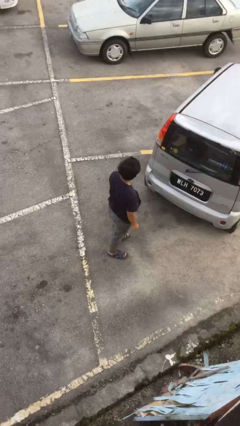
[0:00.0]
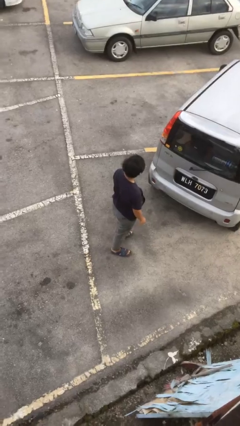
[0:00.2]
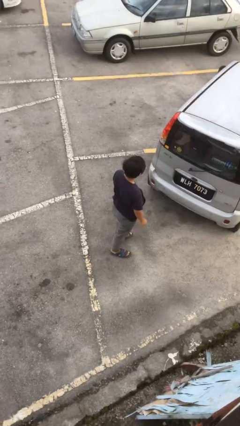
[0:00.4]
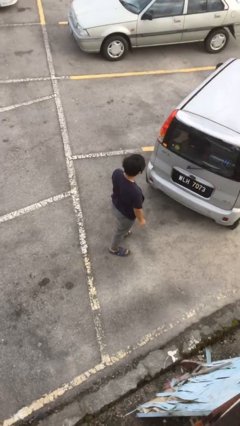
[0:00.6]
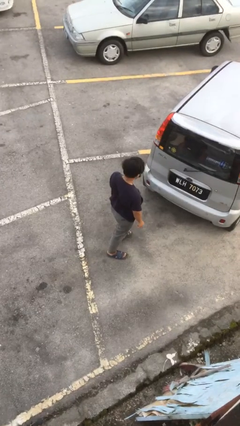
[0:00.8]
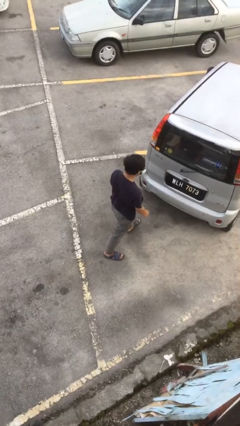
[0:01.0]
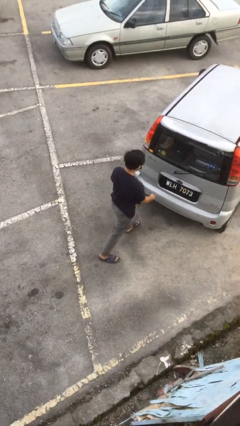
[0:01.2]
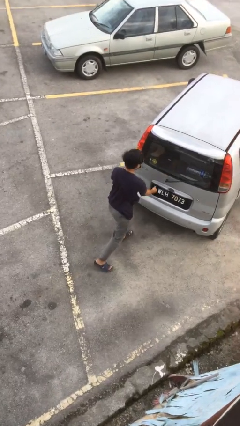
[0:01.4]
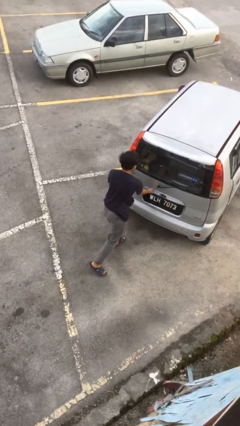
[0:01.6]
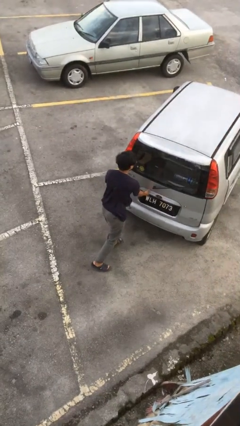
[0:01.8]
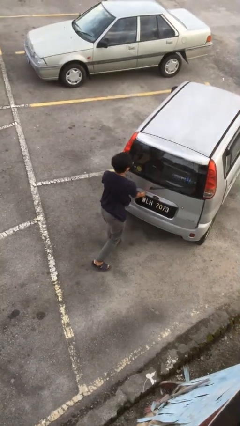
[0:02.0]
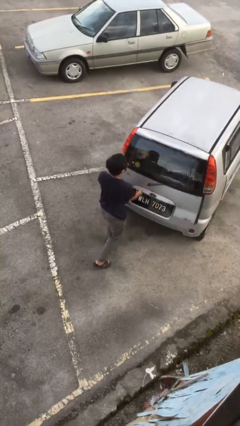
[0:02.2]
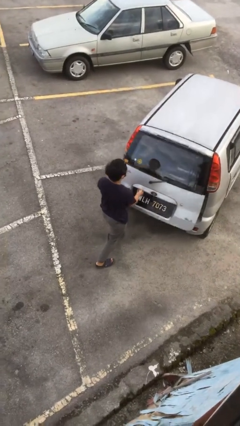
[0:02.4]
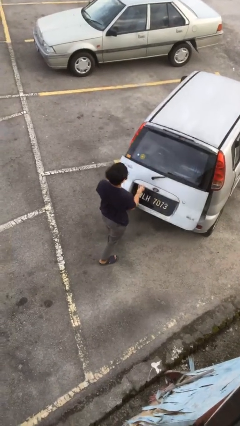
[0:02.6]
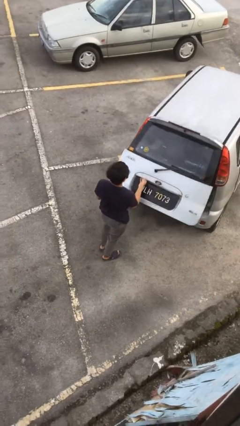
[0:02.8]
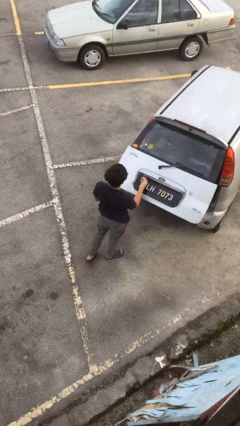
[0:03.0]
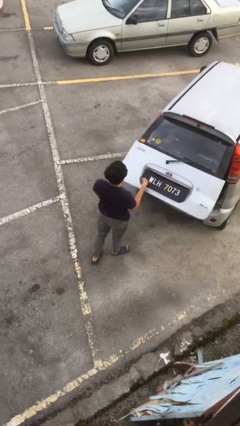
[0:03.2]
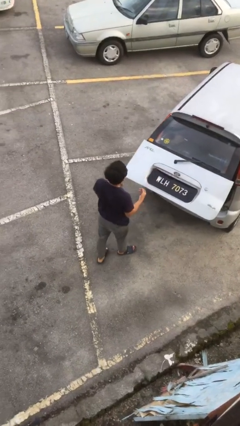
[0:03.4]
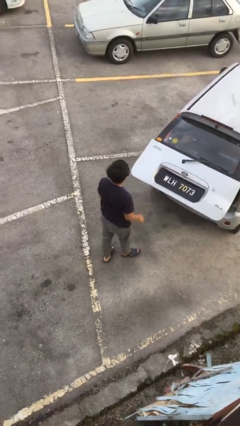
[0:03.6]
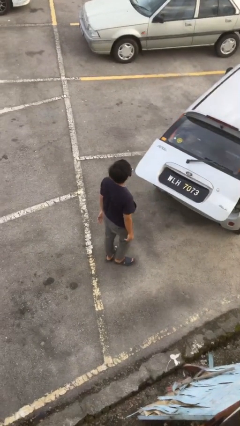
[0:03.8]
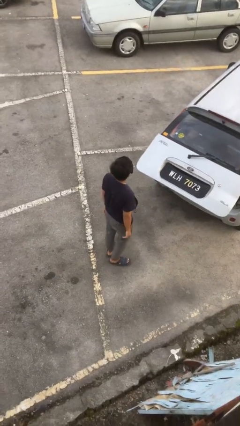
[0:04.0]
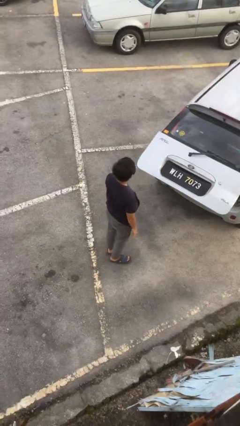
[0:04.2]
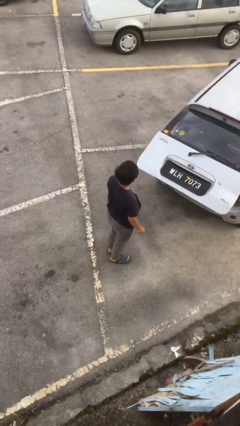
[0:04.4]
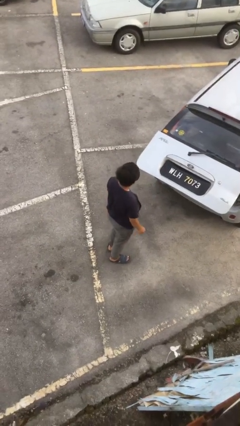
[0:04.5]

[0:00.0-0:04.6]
person opens car trunk

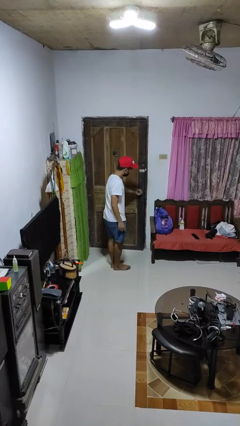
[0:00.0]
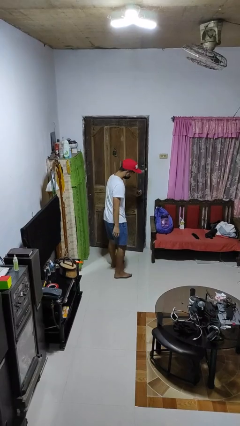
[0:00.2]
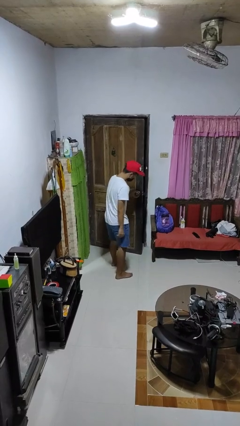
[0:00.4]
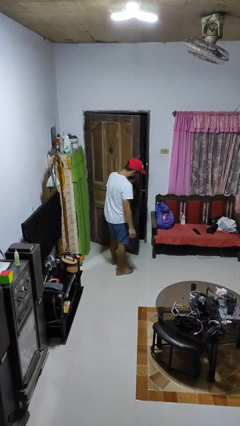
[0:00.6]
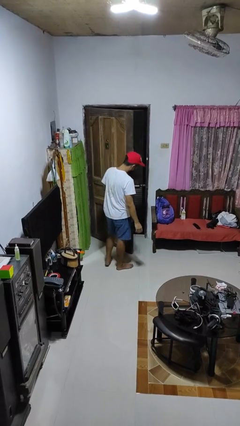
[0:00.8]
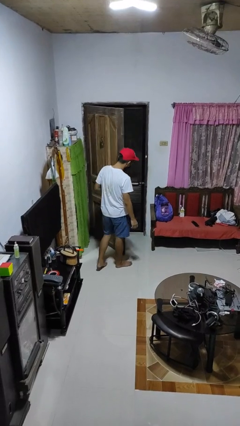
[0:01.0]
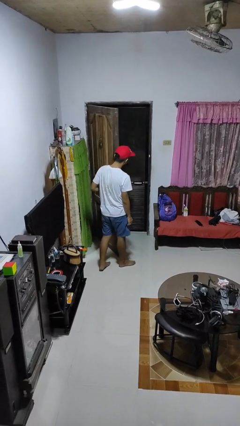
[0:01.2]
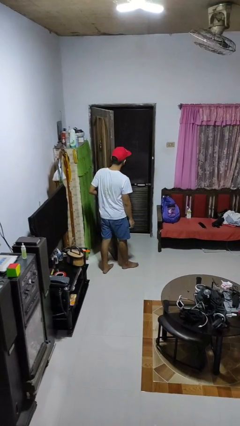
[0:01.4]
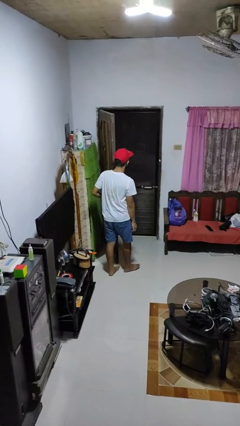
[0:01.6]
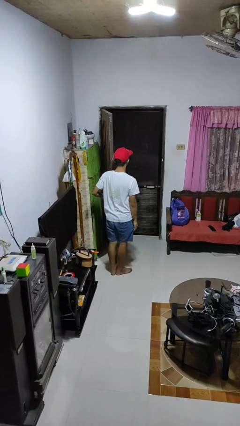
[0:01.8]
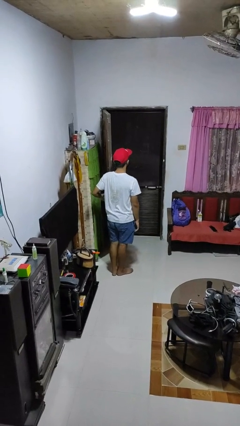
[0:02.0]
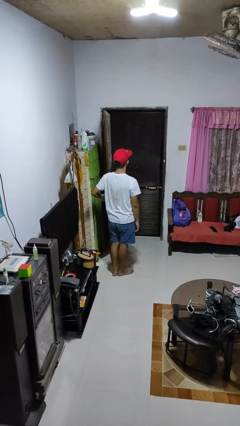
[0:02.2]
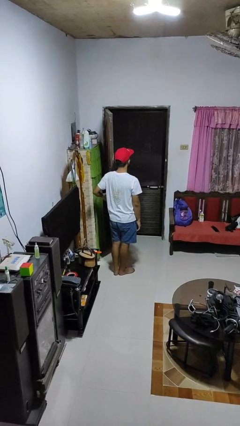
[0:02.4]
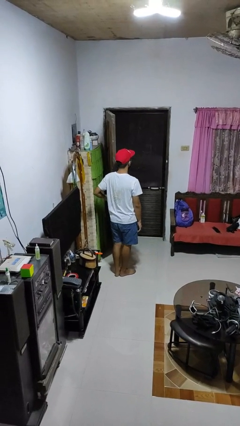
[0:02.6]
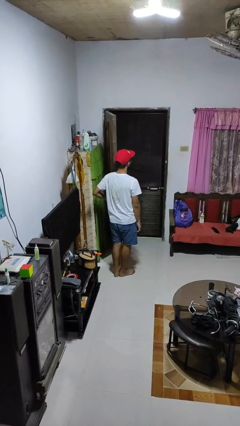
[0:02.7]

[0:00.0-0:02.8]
person opens facility door

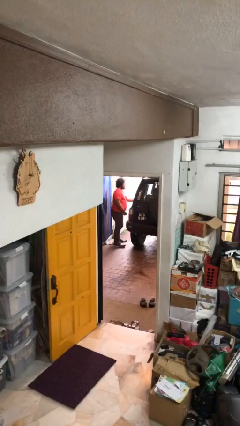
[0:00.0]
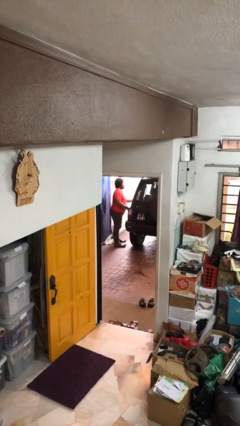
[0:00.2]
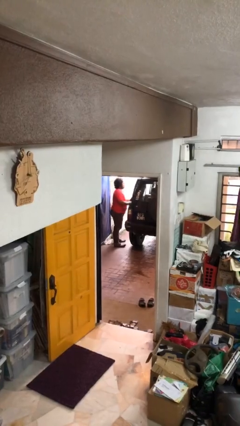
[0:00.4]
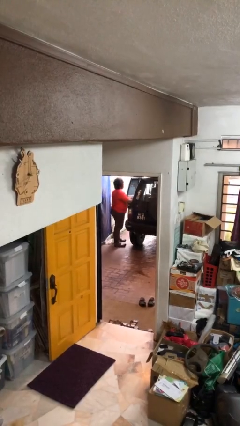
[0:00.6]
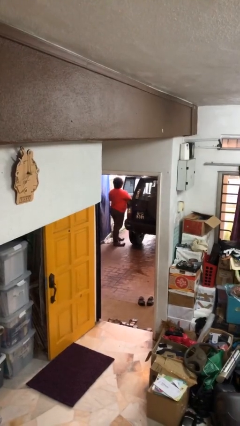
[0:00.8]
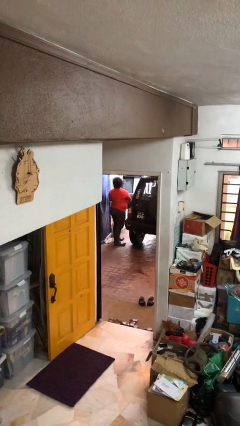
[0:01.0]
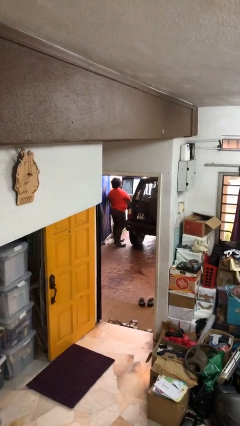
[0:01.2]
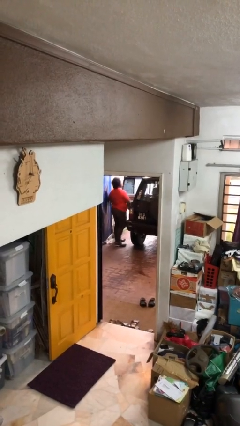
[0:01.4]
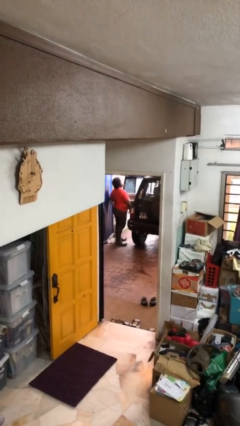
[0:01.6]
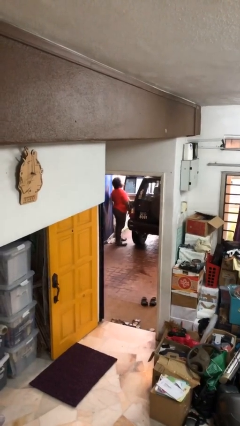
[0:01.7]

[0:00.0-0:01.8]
person opens car door

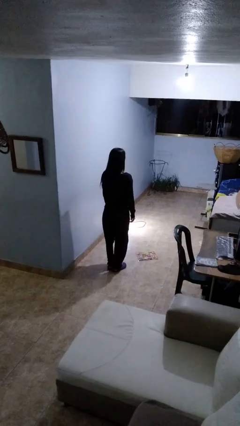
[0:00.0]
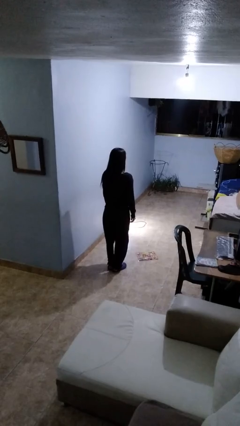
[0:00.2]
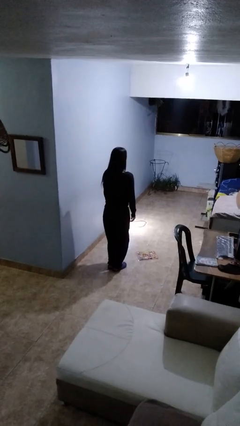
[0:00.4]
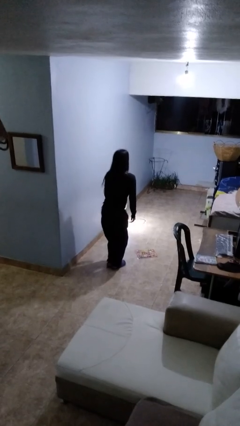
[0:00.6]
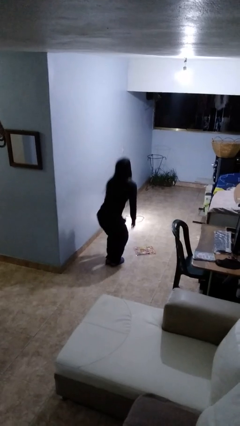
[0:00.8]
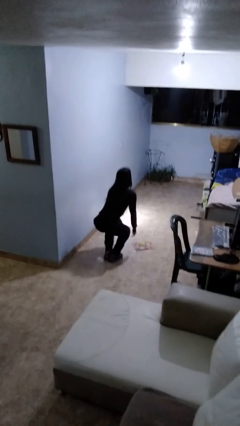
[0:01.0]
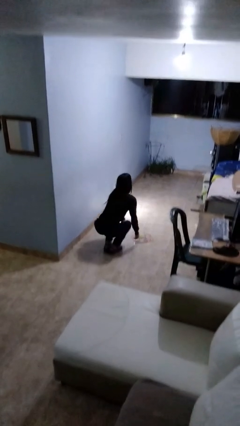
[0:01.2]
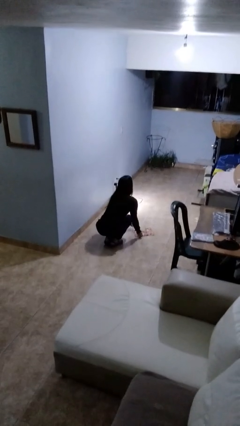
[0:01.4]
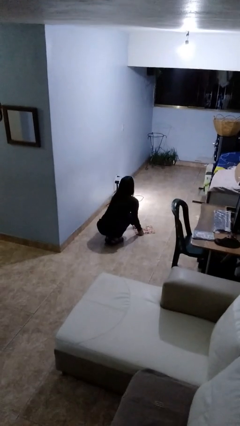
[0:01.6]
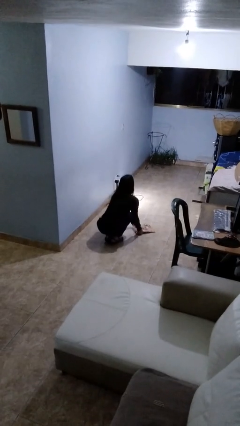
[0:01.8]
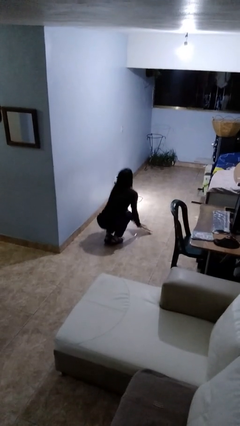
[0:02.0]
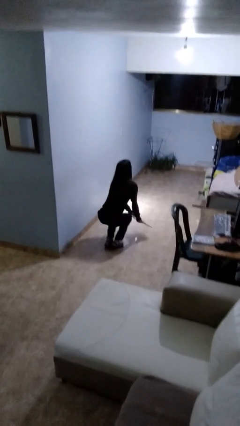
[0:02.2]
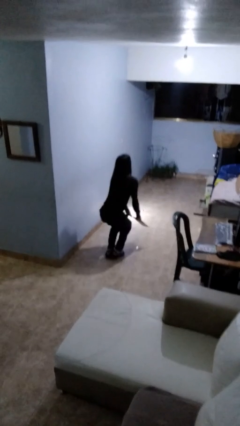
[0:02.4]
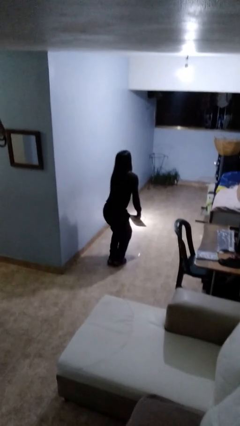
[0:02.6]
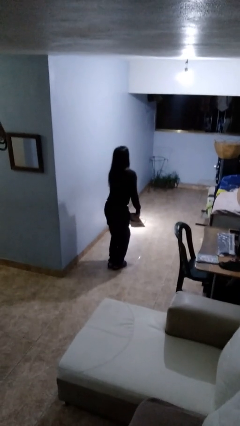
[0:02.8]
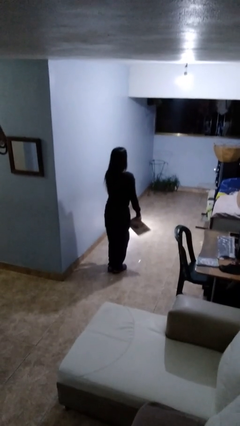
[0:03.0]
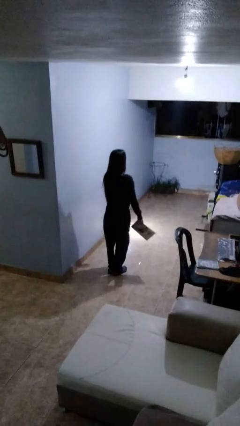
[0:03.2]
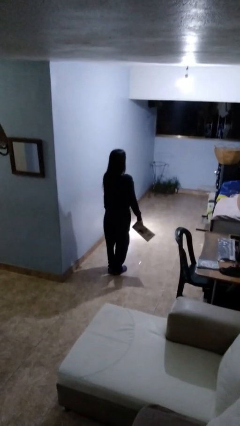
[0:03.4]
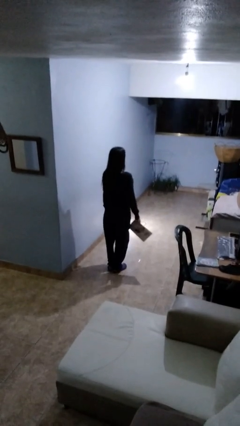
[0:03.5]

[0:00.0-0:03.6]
person picks up object from floor

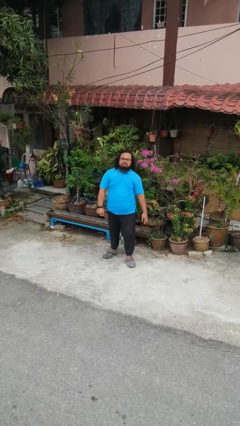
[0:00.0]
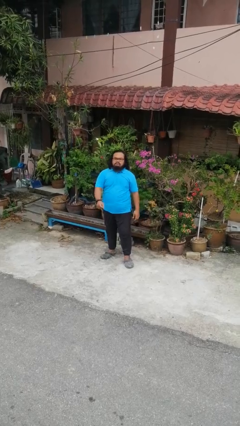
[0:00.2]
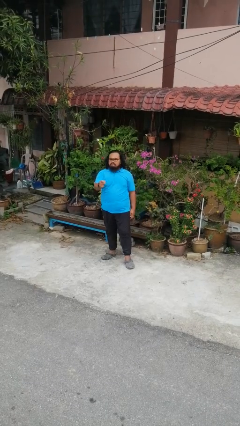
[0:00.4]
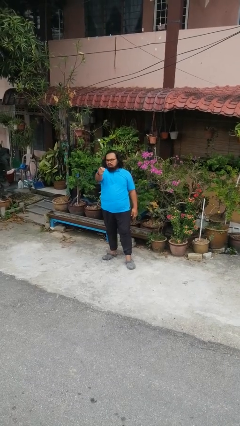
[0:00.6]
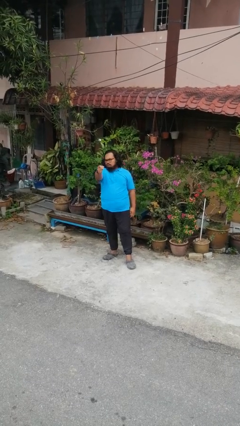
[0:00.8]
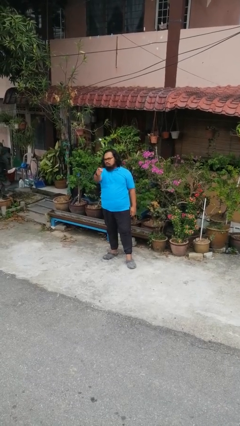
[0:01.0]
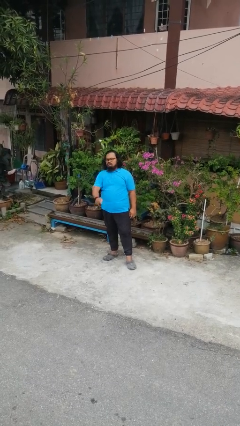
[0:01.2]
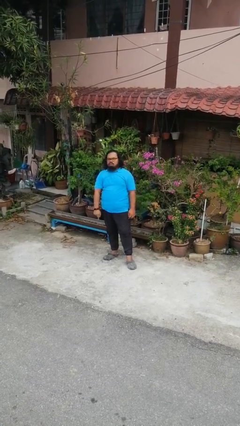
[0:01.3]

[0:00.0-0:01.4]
person points at person

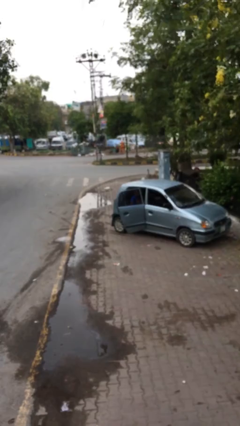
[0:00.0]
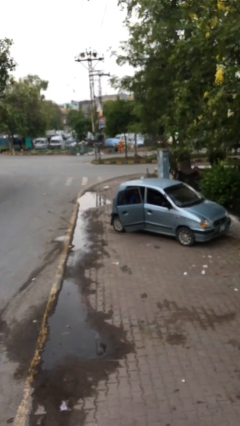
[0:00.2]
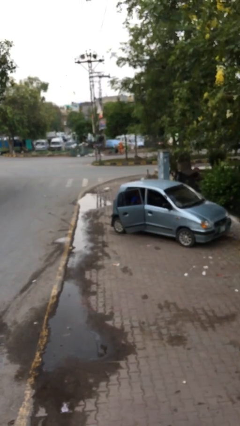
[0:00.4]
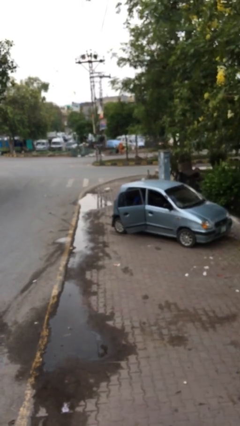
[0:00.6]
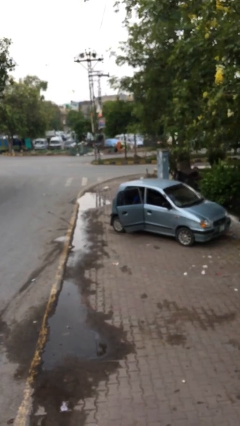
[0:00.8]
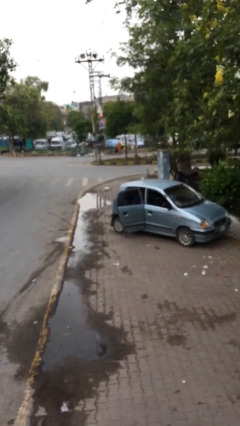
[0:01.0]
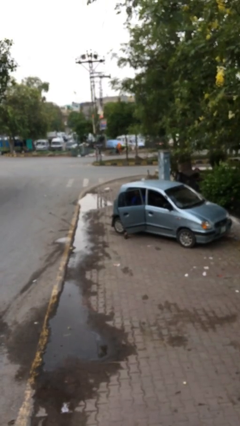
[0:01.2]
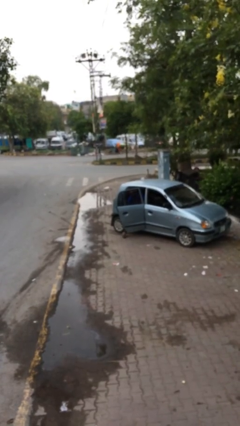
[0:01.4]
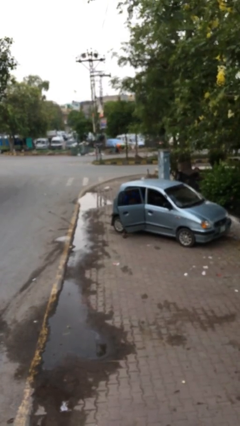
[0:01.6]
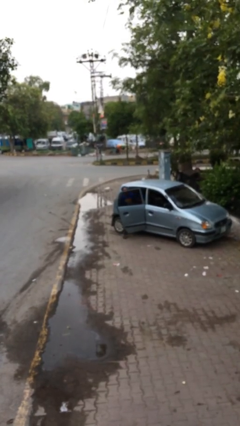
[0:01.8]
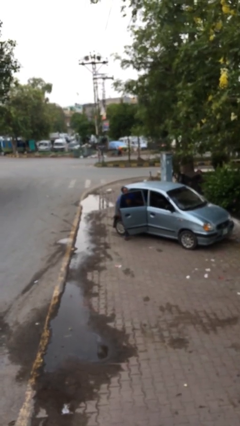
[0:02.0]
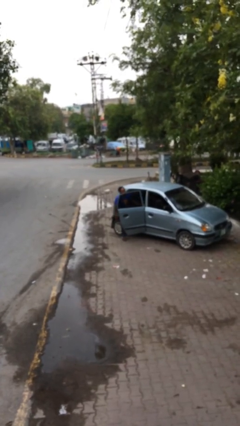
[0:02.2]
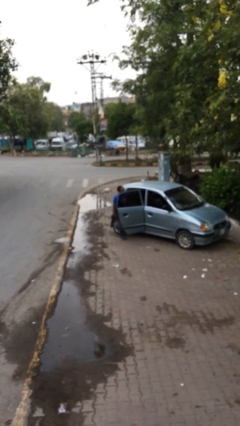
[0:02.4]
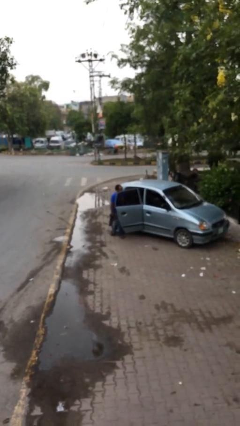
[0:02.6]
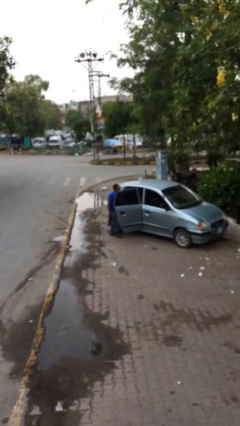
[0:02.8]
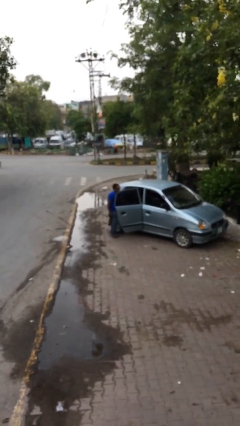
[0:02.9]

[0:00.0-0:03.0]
person exits car
